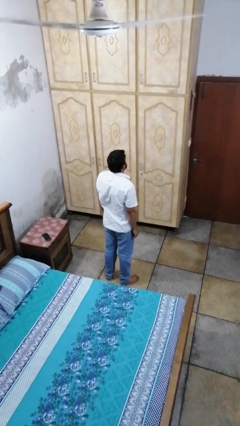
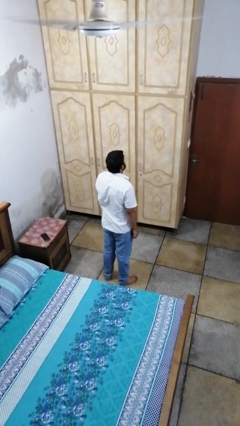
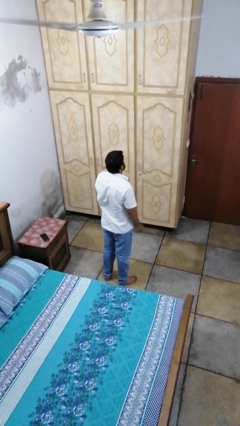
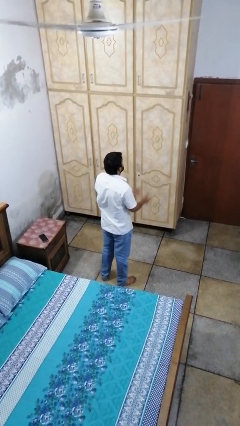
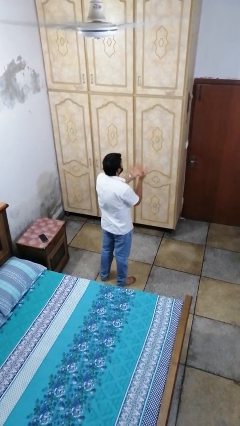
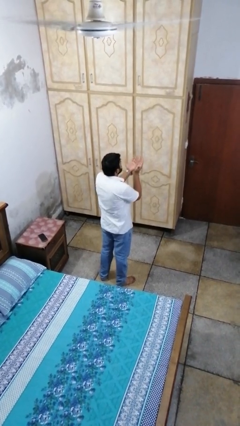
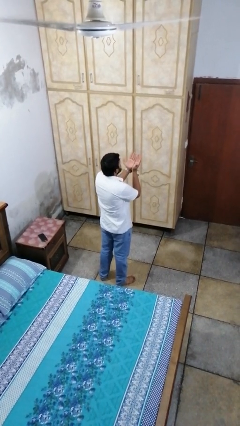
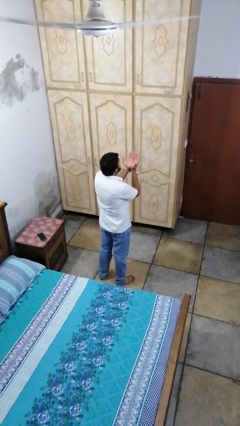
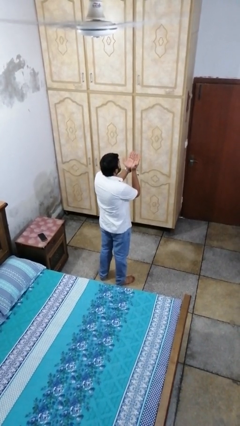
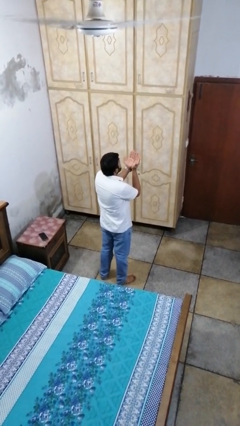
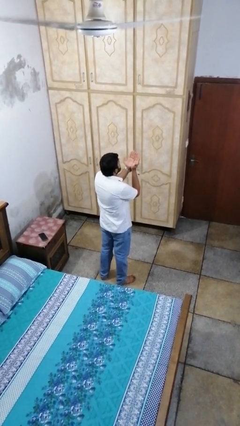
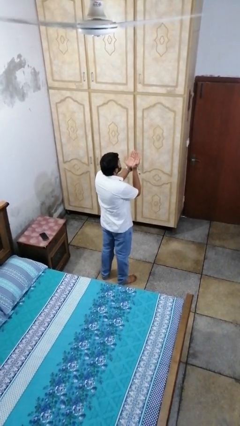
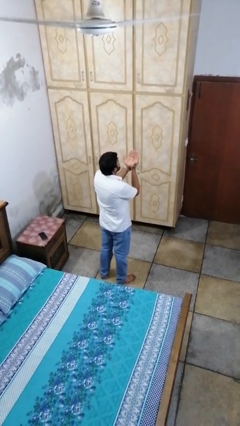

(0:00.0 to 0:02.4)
person prays

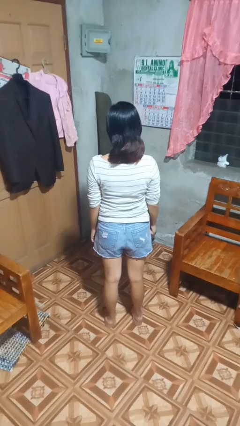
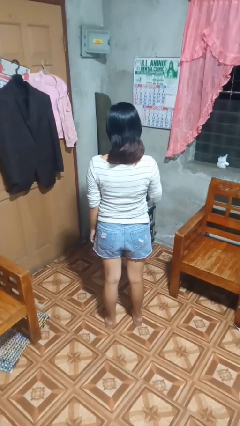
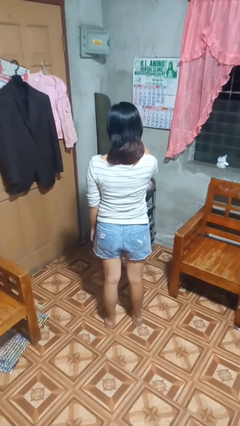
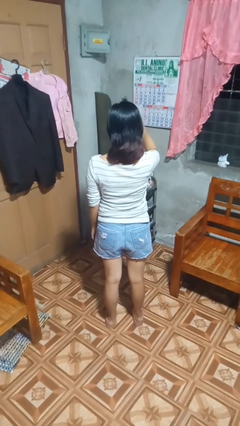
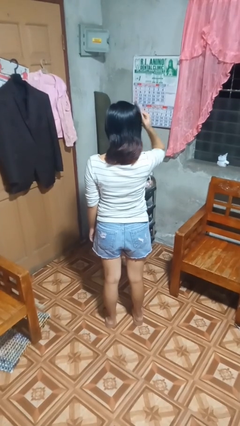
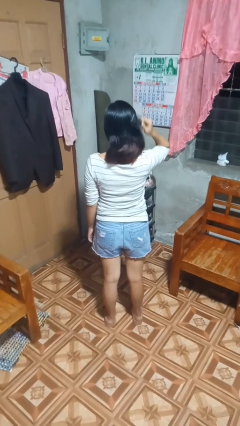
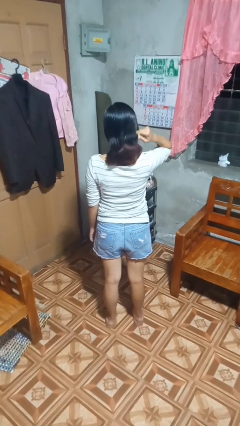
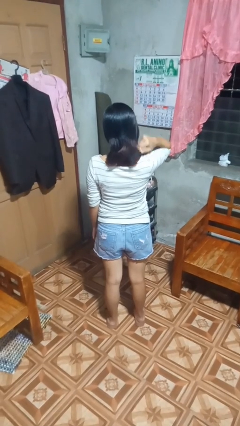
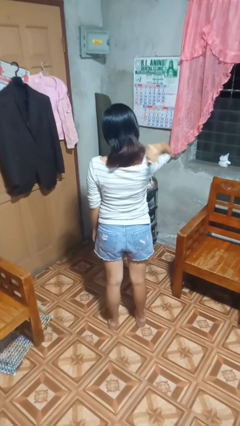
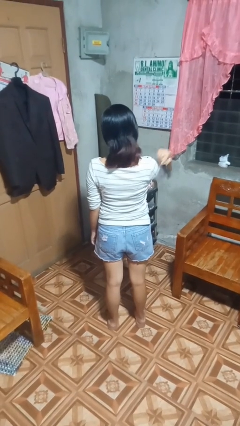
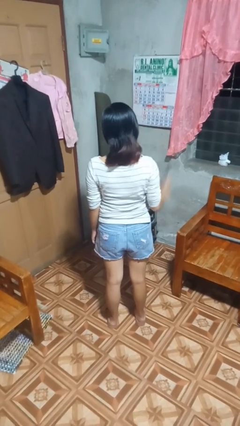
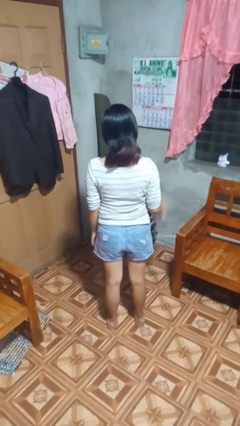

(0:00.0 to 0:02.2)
person brushes hair

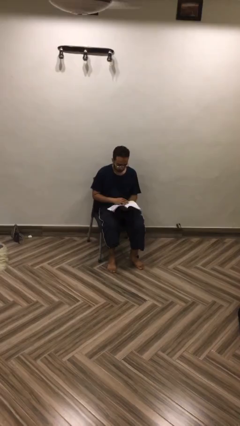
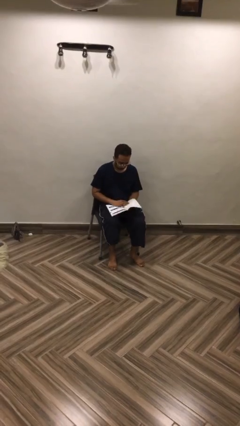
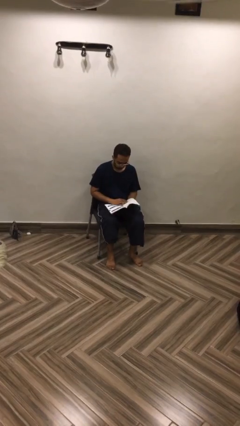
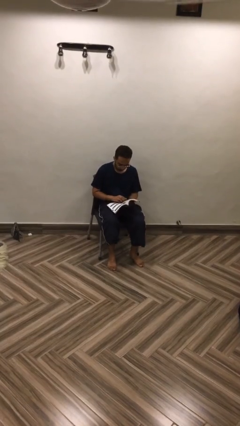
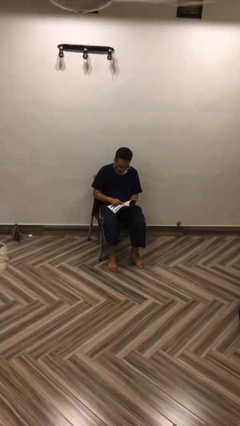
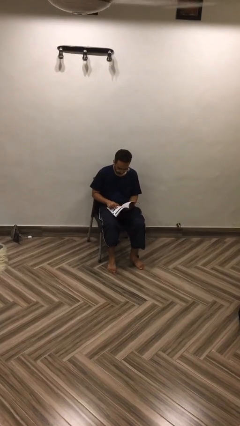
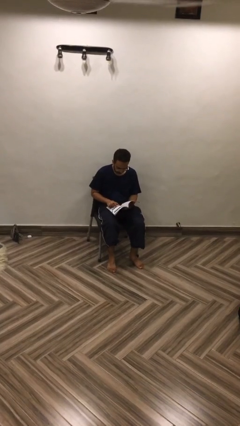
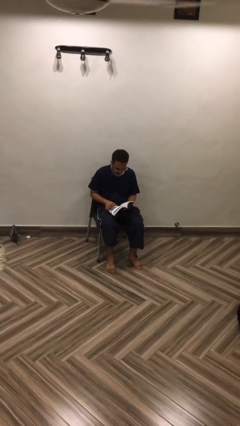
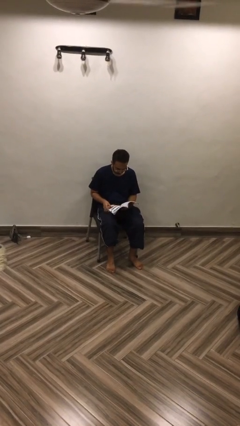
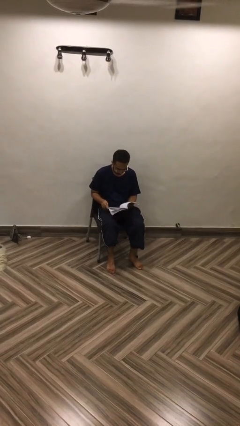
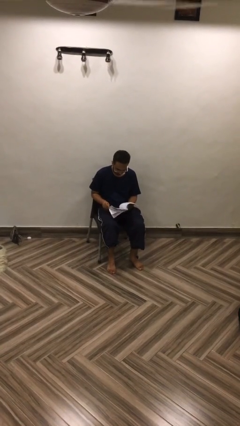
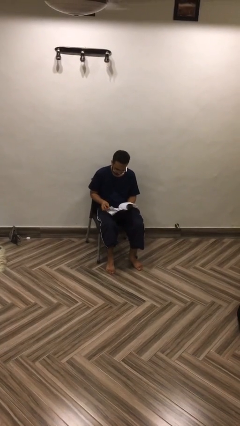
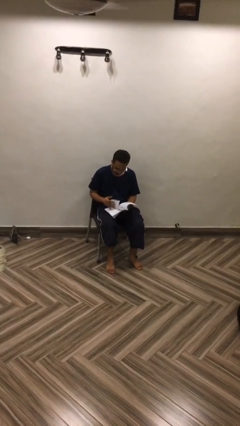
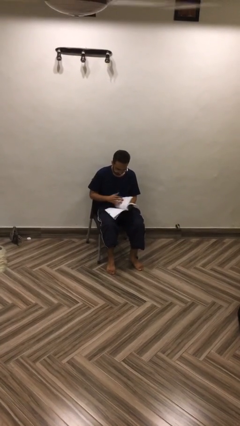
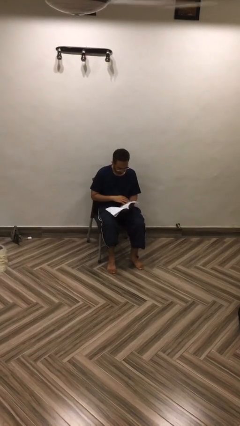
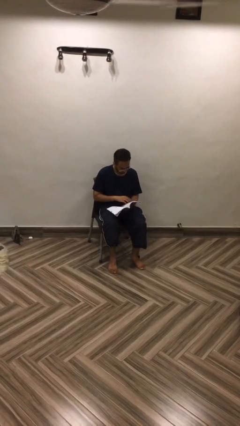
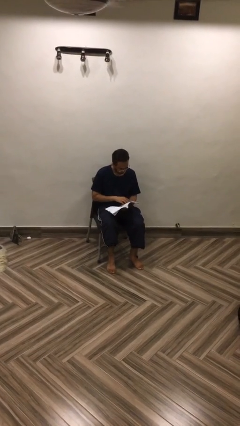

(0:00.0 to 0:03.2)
person reads document

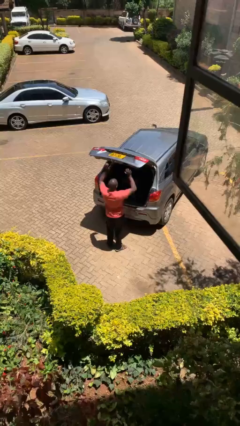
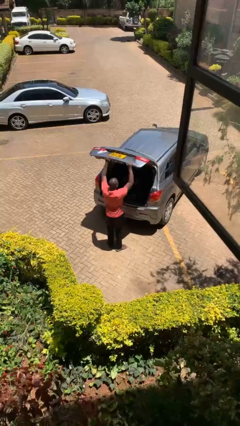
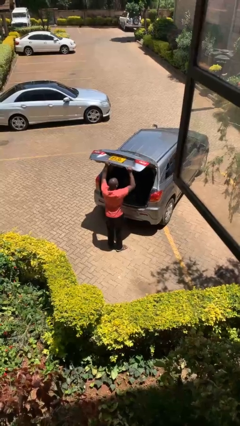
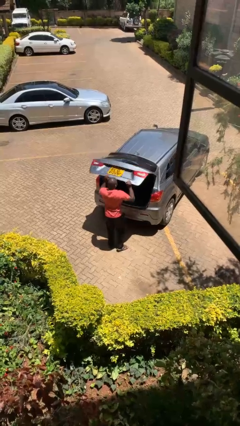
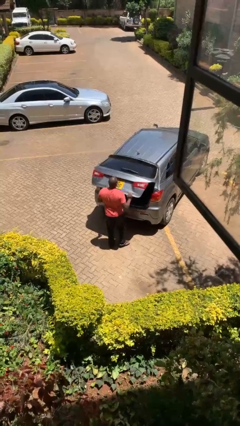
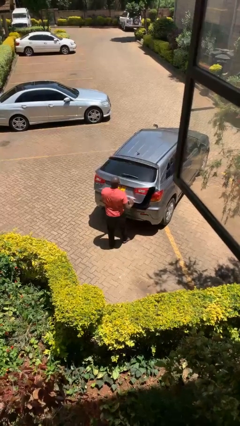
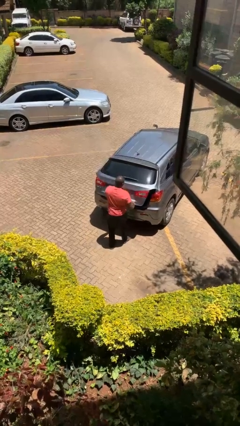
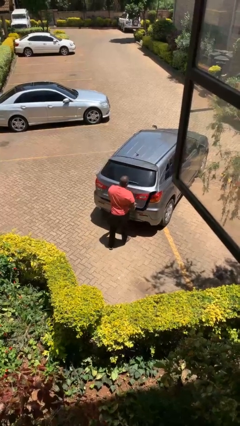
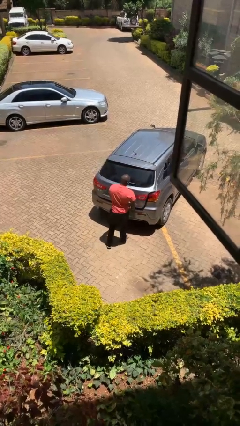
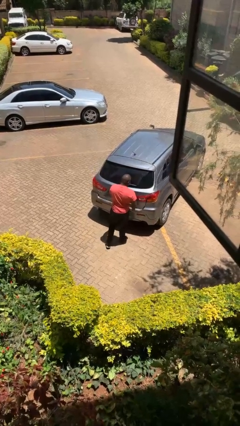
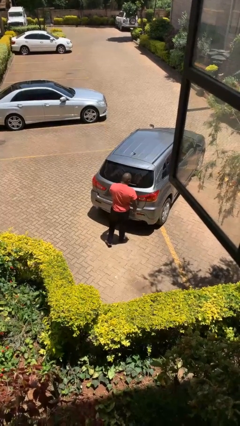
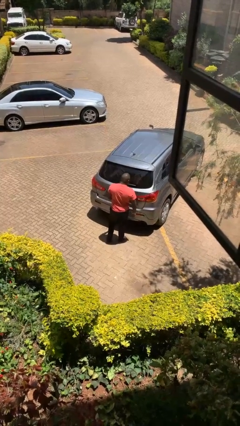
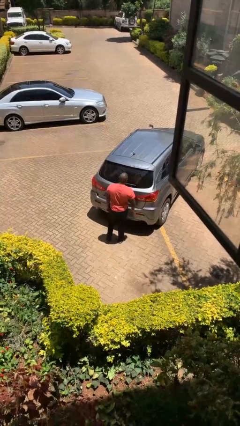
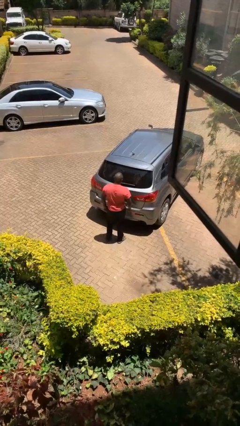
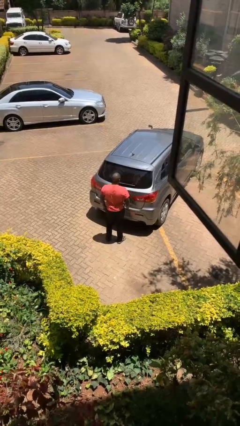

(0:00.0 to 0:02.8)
person closes car trunk

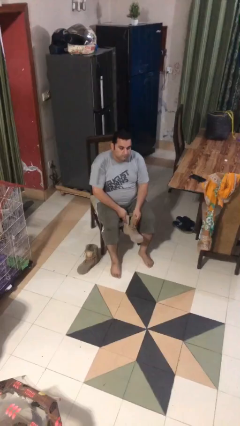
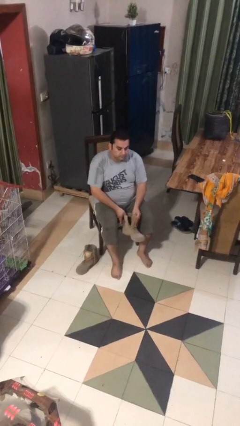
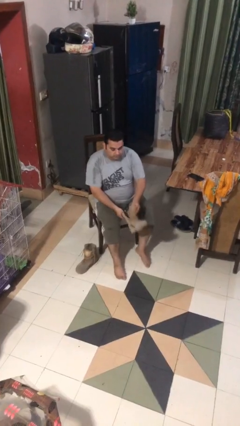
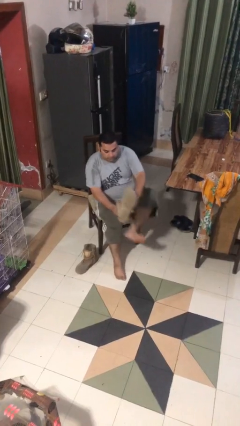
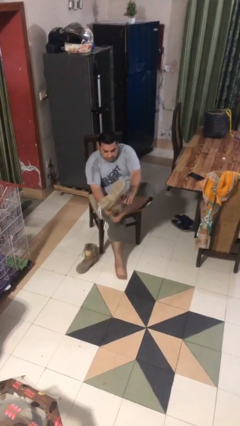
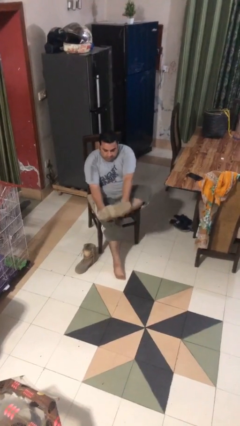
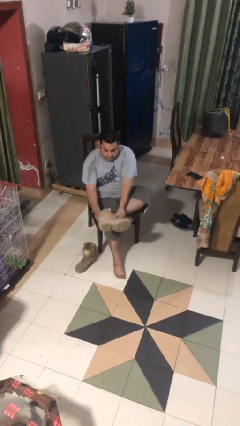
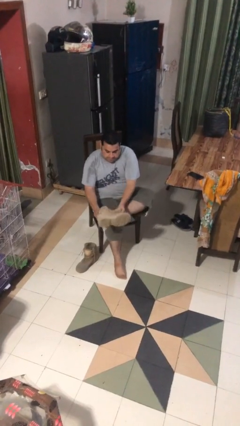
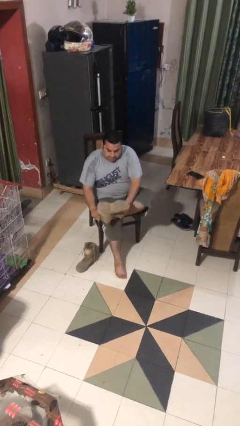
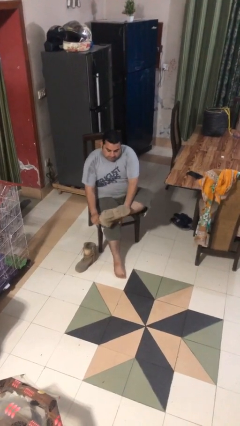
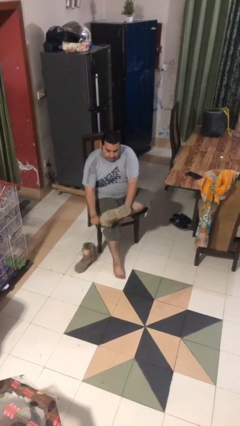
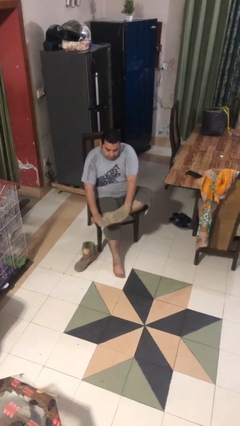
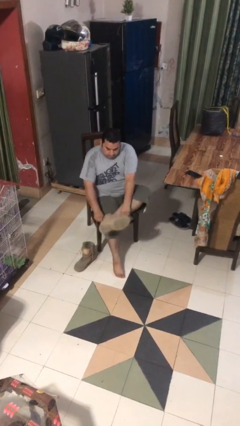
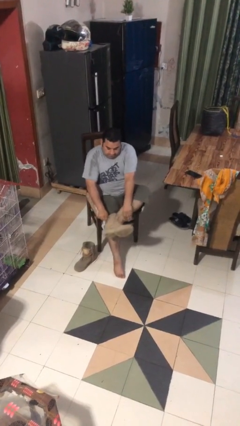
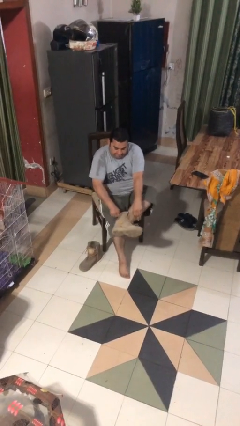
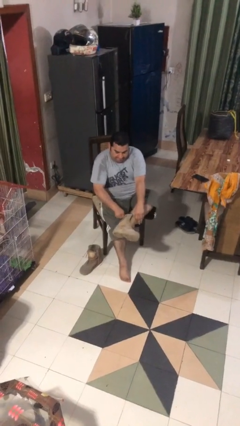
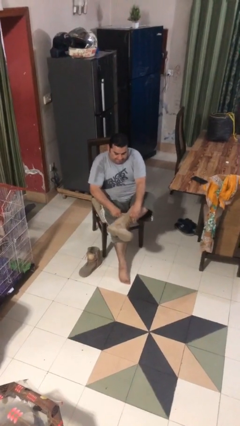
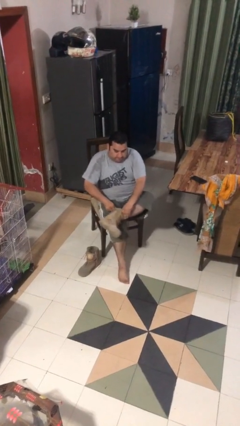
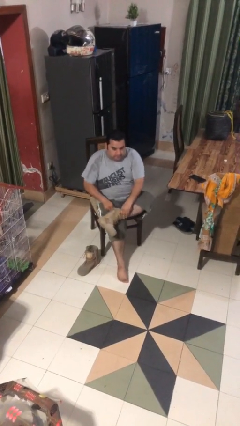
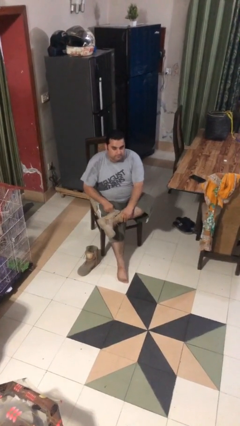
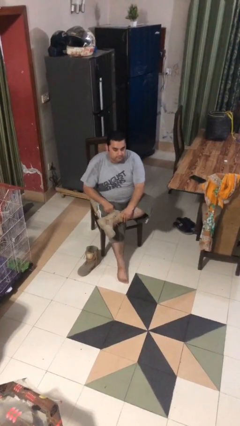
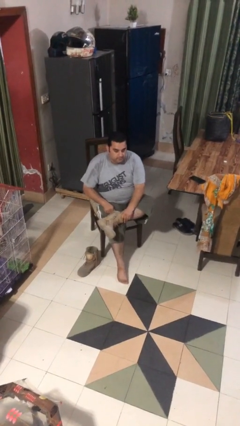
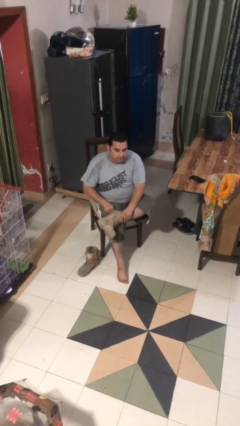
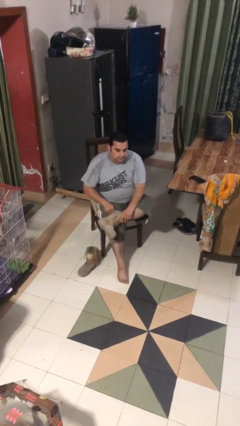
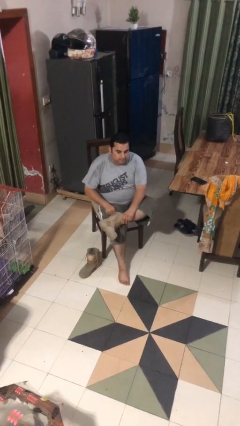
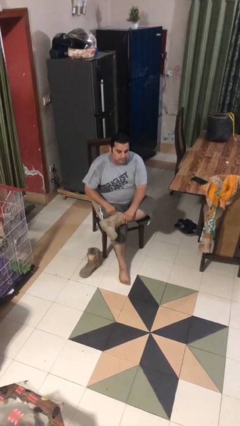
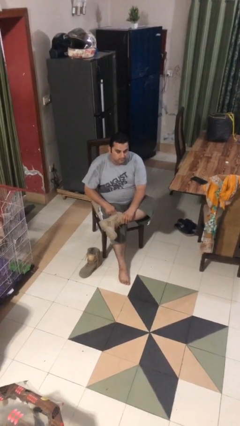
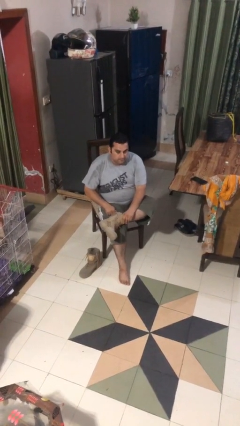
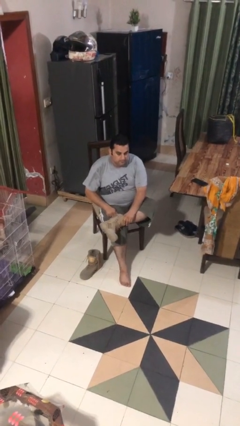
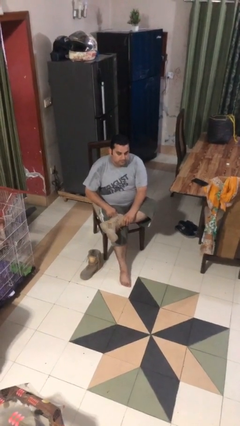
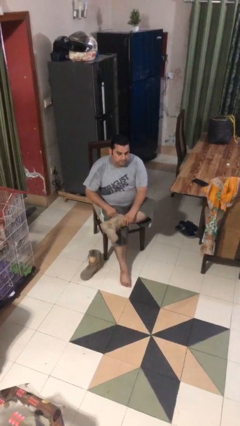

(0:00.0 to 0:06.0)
person puts on boots

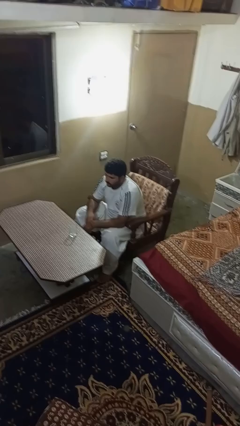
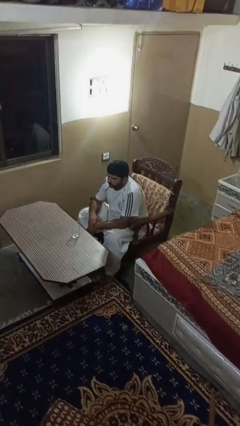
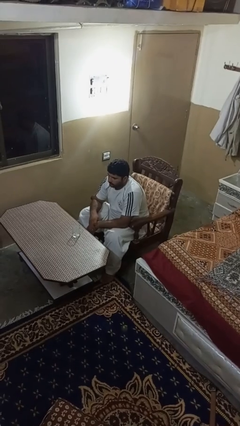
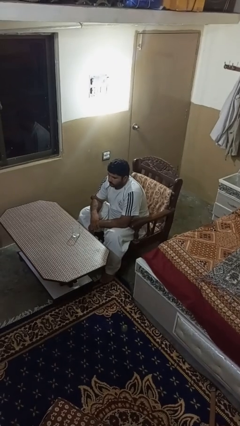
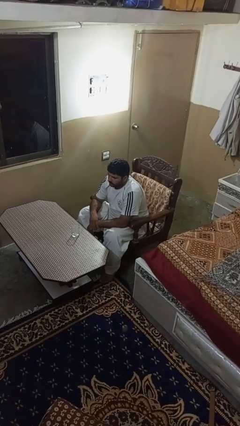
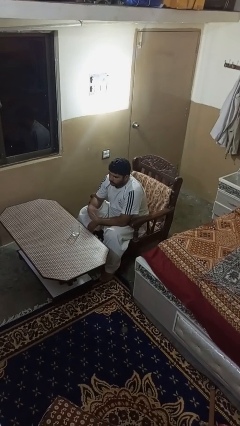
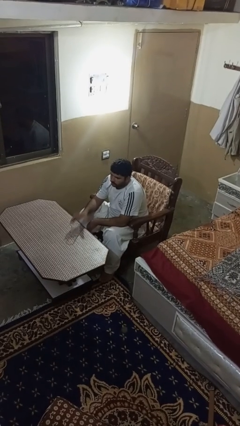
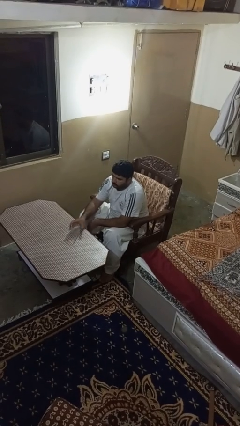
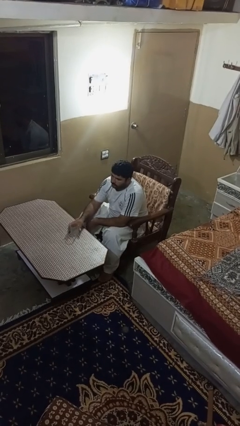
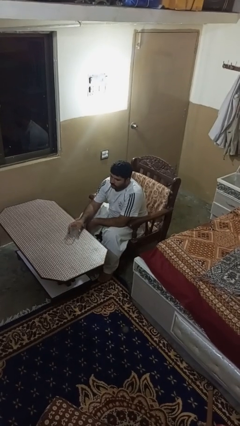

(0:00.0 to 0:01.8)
person picks up object from table
